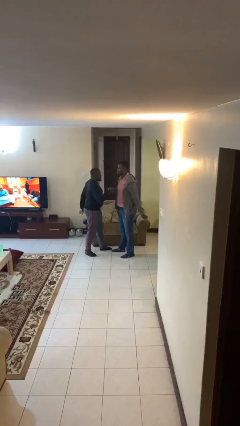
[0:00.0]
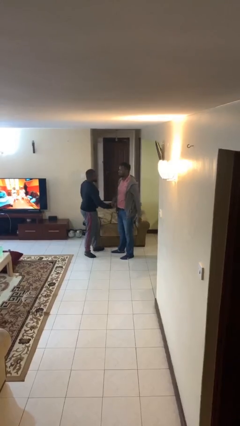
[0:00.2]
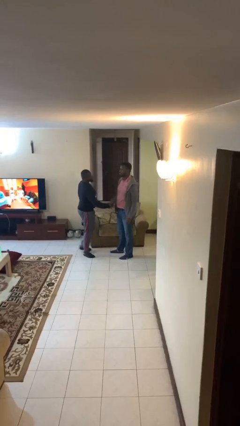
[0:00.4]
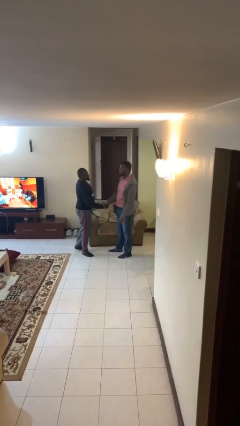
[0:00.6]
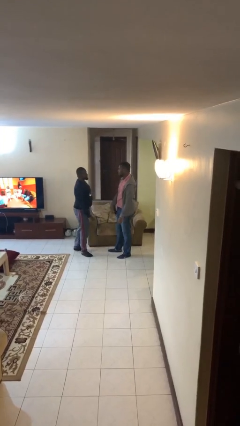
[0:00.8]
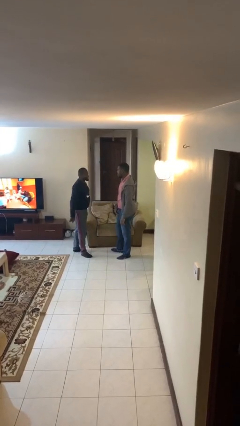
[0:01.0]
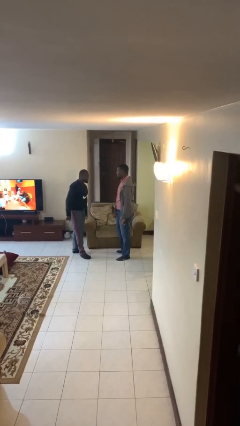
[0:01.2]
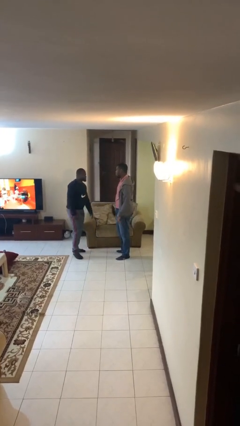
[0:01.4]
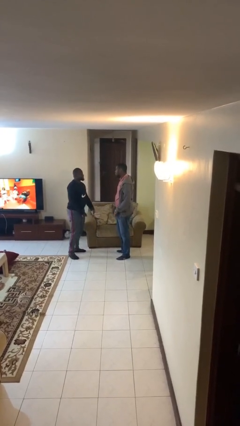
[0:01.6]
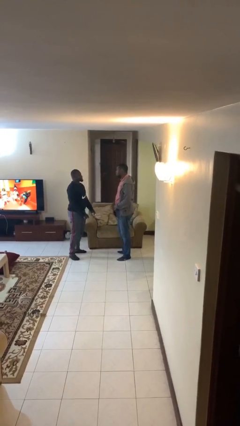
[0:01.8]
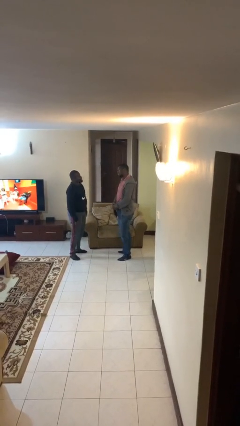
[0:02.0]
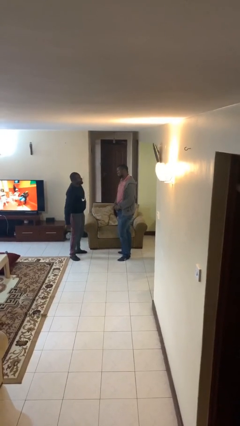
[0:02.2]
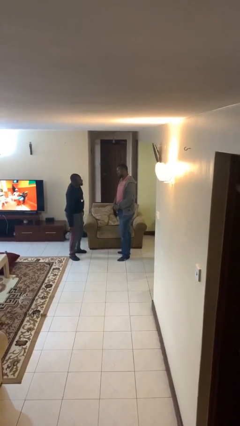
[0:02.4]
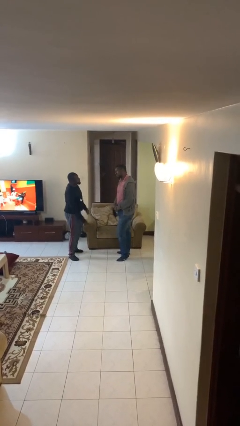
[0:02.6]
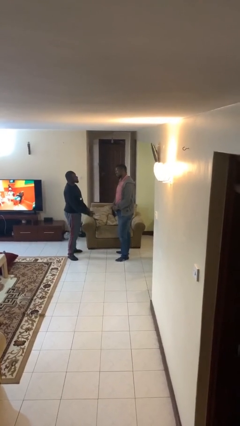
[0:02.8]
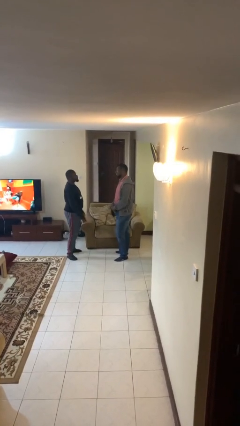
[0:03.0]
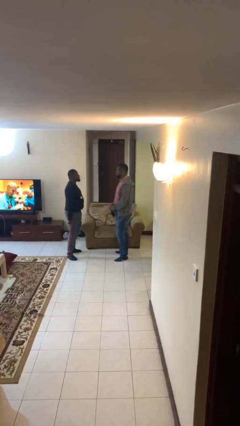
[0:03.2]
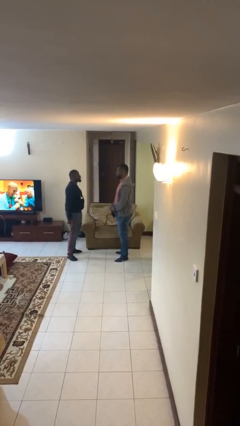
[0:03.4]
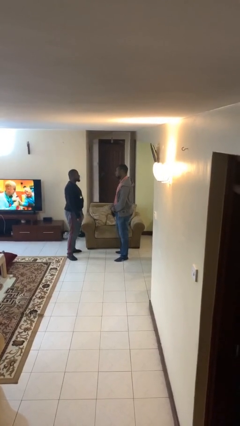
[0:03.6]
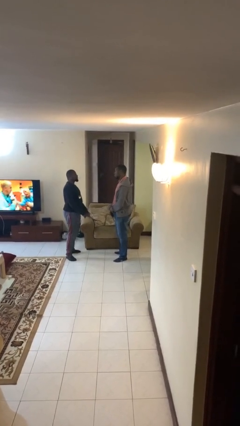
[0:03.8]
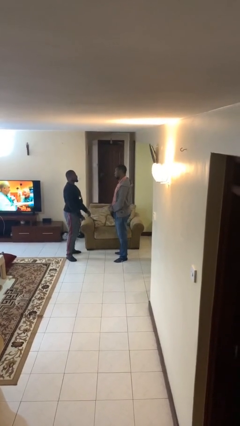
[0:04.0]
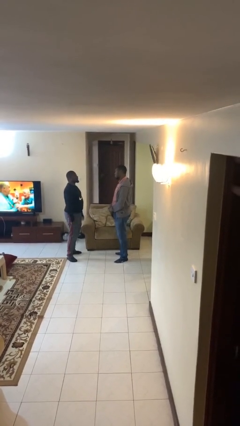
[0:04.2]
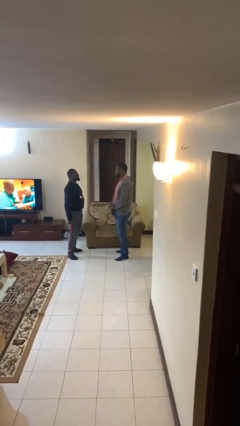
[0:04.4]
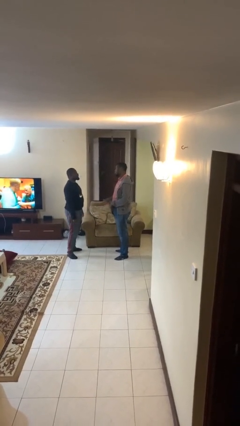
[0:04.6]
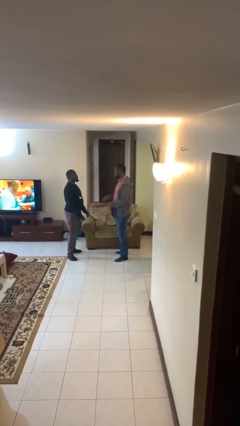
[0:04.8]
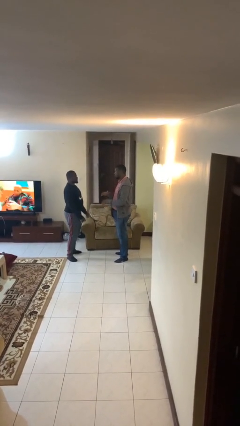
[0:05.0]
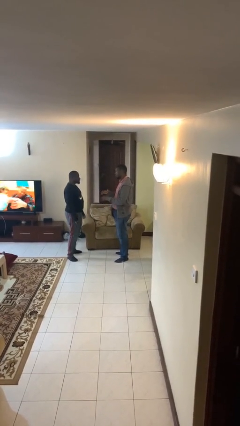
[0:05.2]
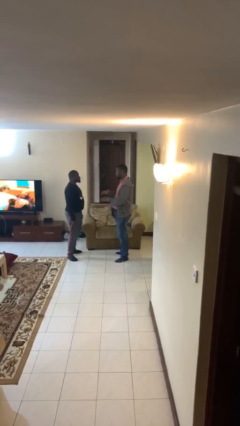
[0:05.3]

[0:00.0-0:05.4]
person talks to person

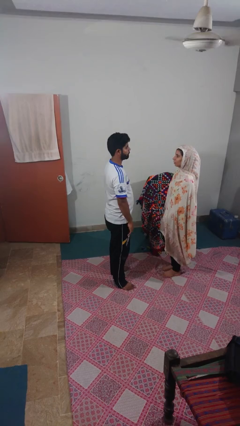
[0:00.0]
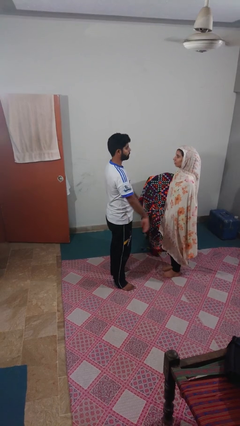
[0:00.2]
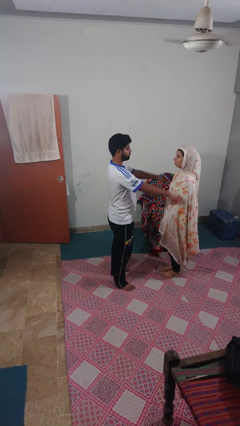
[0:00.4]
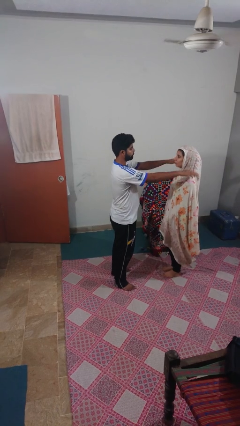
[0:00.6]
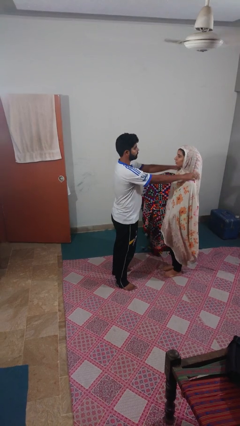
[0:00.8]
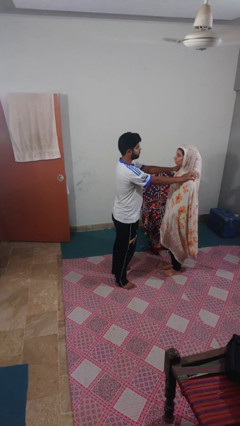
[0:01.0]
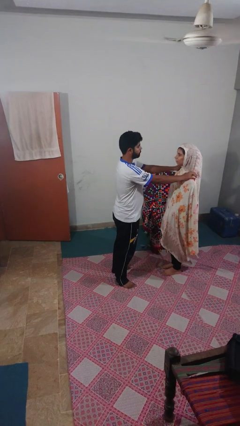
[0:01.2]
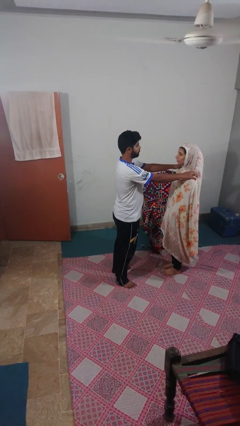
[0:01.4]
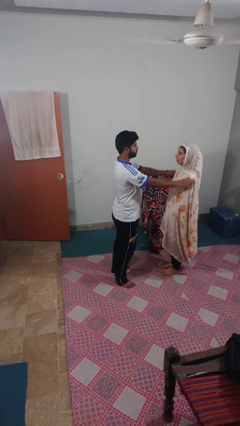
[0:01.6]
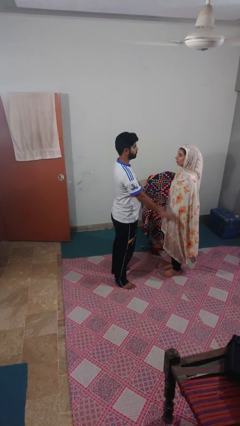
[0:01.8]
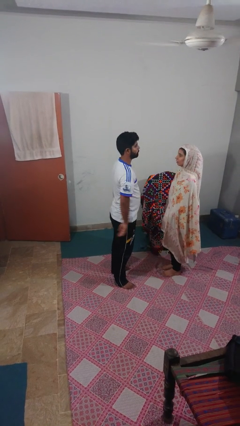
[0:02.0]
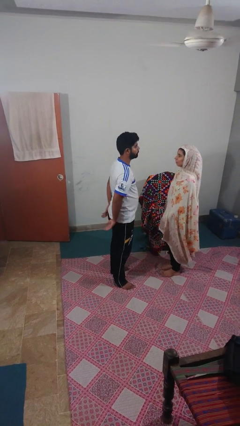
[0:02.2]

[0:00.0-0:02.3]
person pounds shoulders of person

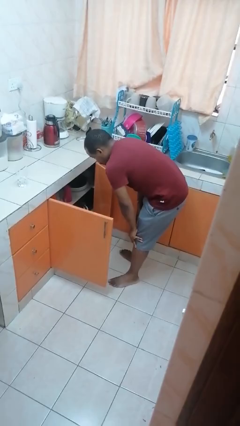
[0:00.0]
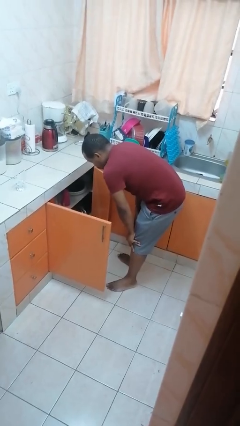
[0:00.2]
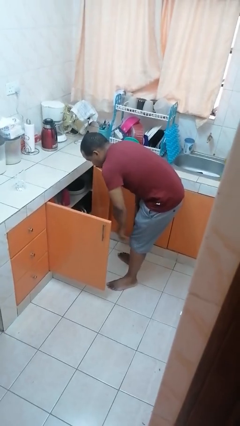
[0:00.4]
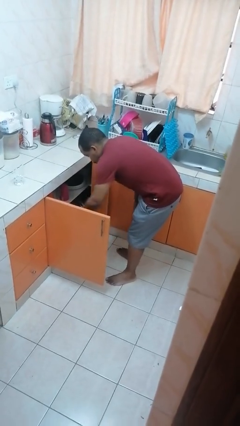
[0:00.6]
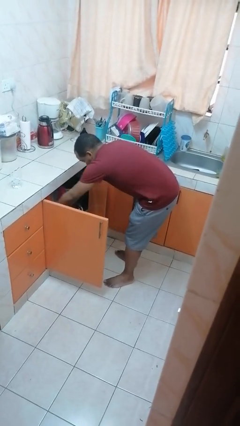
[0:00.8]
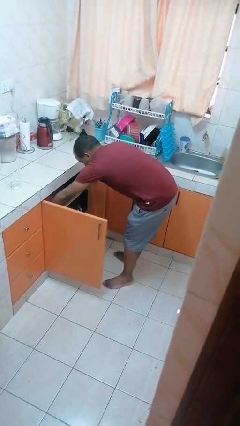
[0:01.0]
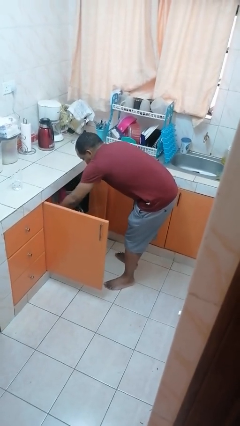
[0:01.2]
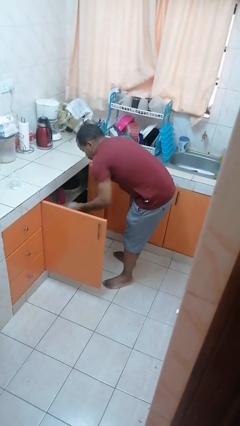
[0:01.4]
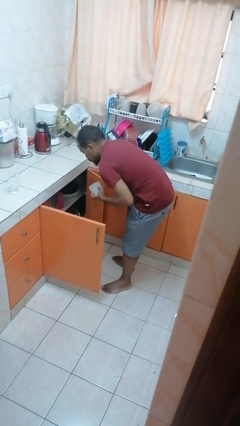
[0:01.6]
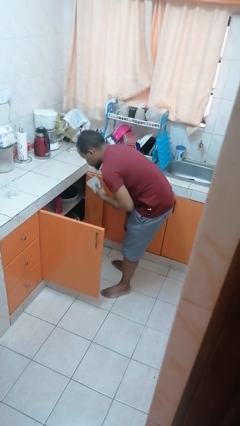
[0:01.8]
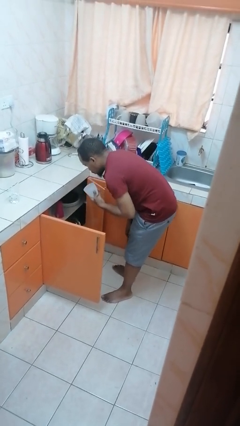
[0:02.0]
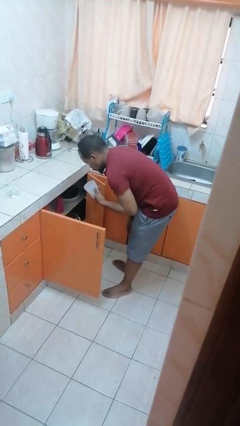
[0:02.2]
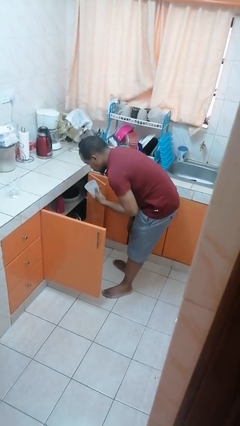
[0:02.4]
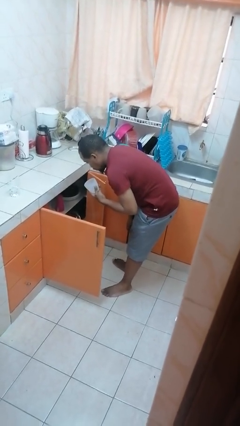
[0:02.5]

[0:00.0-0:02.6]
person takes object from cabinet

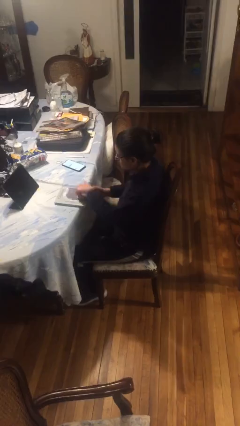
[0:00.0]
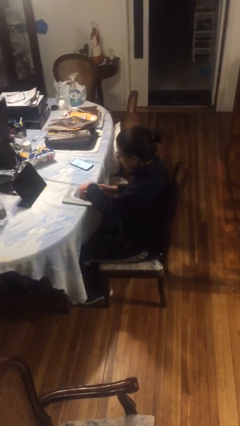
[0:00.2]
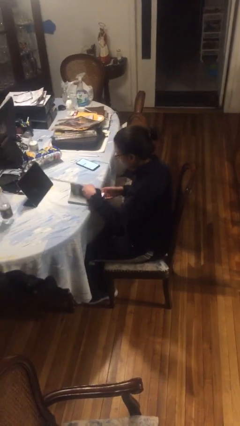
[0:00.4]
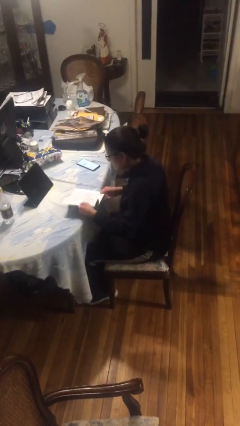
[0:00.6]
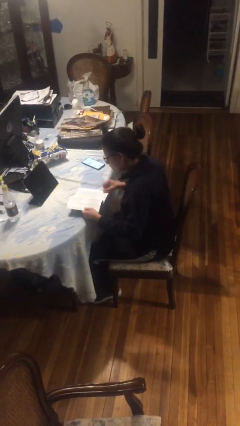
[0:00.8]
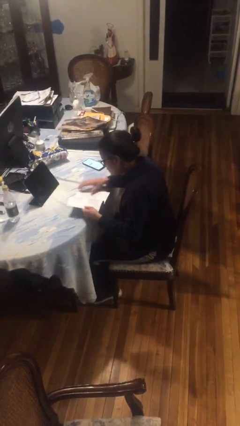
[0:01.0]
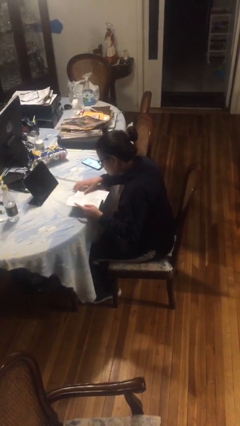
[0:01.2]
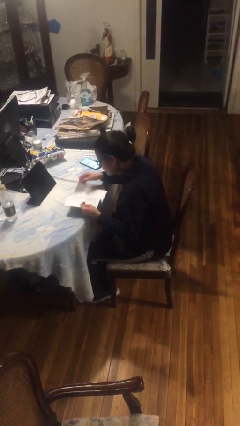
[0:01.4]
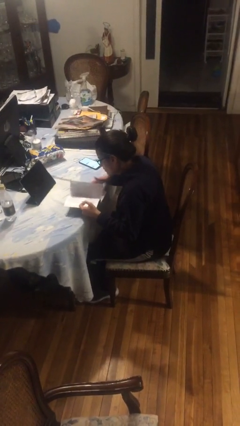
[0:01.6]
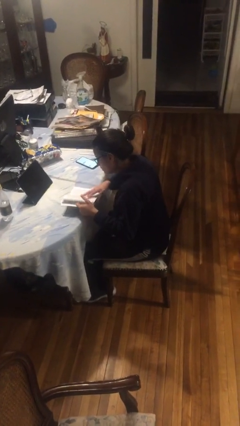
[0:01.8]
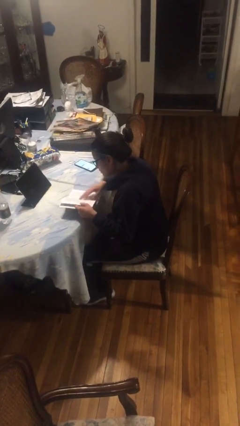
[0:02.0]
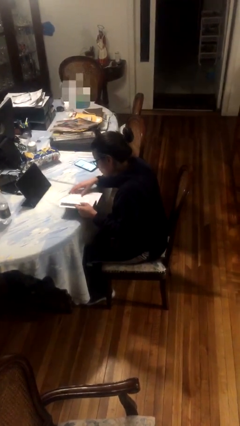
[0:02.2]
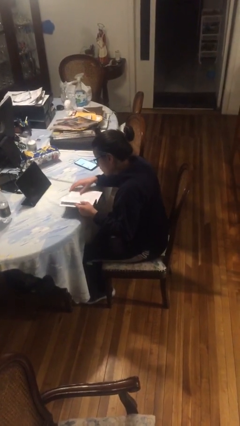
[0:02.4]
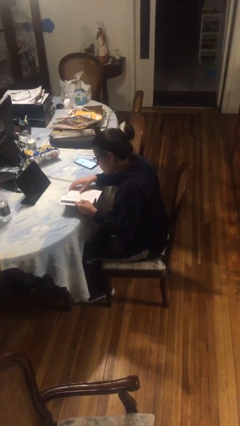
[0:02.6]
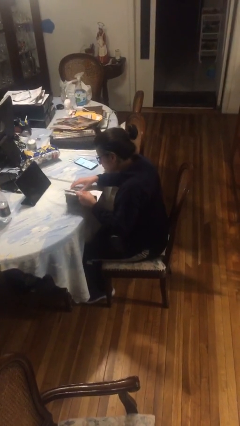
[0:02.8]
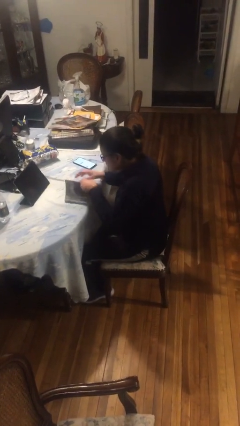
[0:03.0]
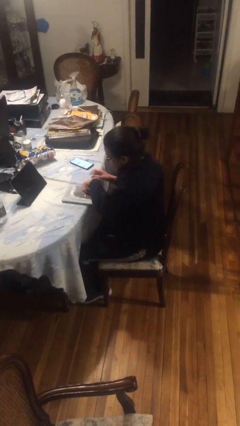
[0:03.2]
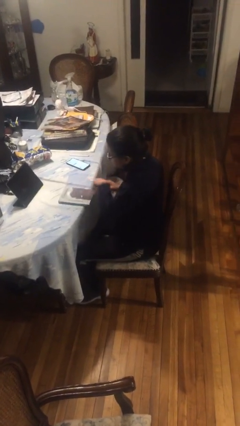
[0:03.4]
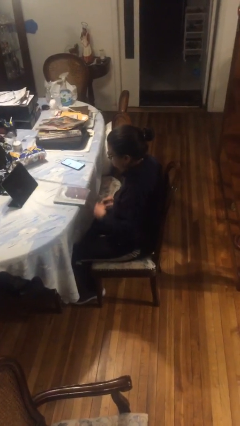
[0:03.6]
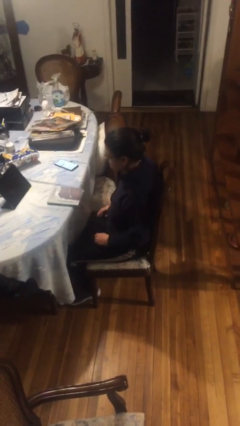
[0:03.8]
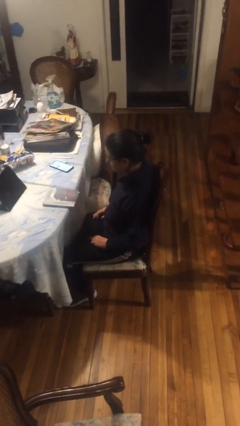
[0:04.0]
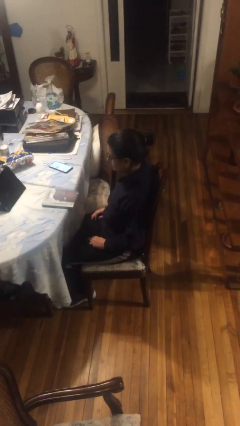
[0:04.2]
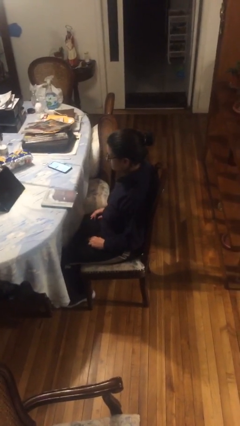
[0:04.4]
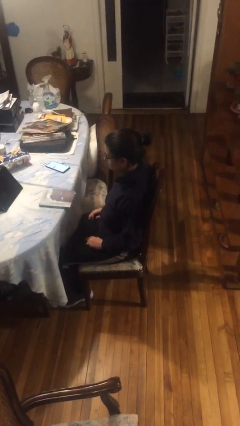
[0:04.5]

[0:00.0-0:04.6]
person reads book

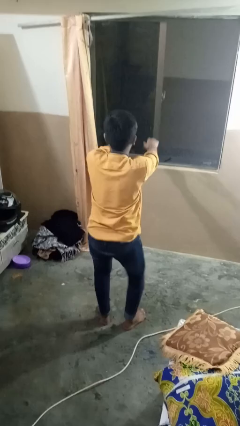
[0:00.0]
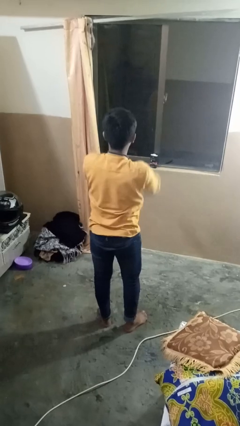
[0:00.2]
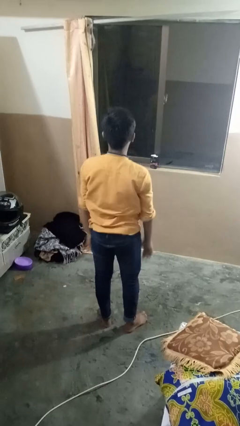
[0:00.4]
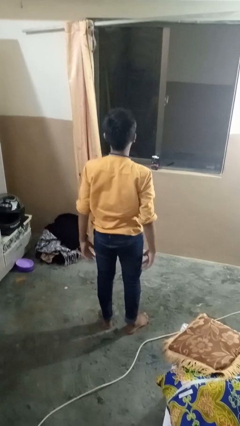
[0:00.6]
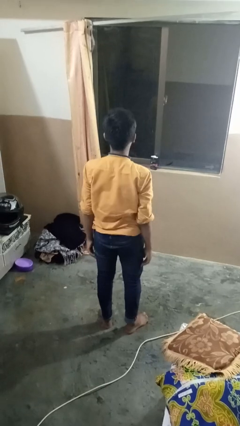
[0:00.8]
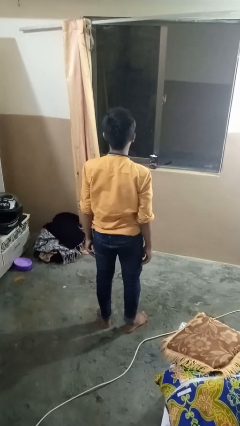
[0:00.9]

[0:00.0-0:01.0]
person stands up

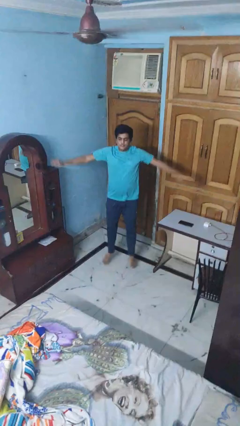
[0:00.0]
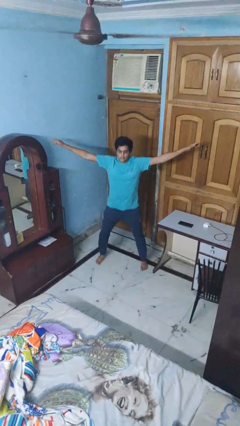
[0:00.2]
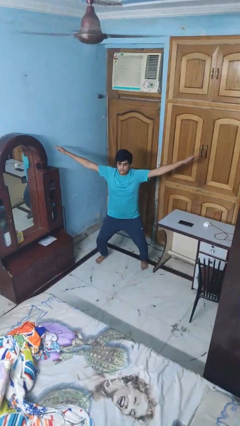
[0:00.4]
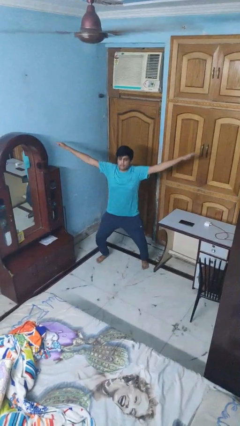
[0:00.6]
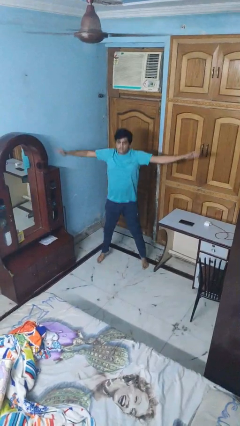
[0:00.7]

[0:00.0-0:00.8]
person exercises with jumping jacks

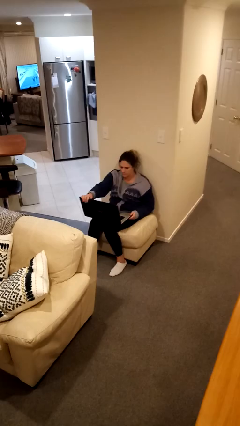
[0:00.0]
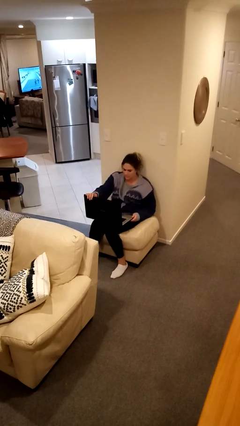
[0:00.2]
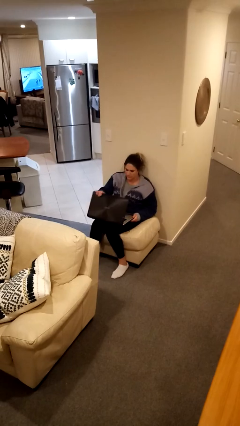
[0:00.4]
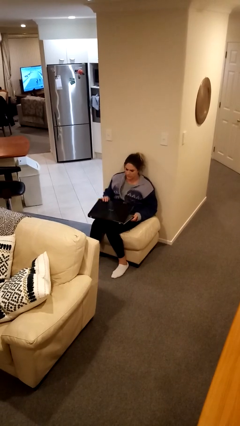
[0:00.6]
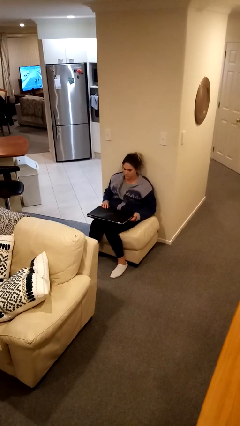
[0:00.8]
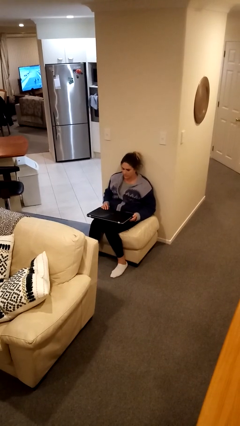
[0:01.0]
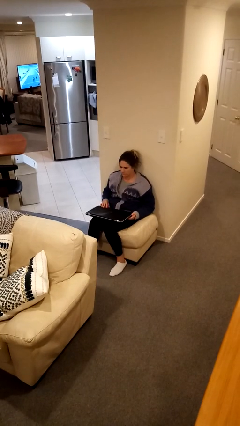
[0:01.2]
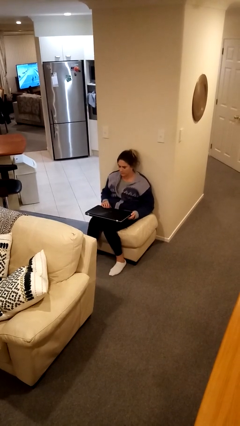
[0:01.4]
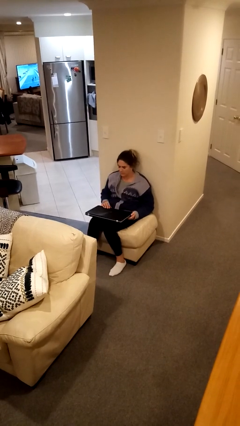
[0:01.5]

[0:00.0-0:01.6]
person closes laptop
